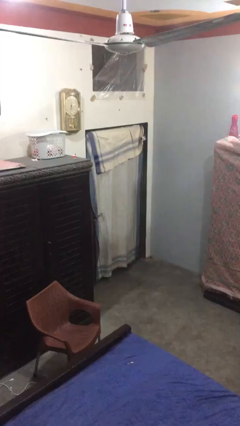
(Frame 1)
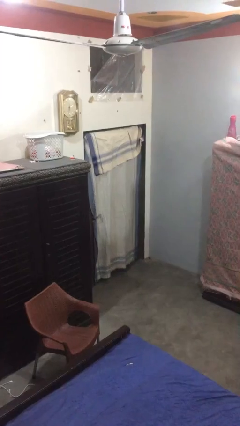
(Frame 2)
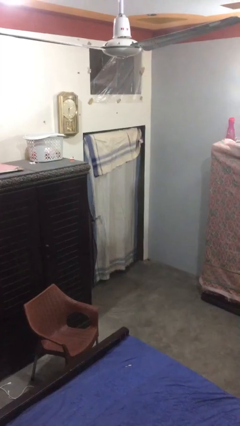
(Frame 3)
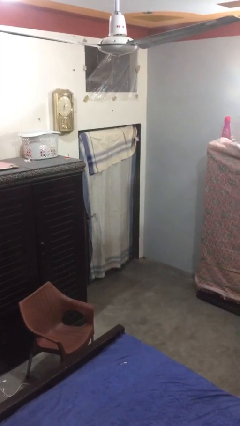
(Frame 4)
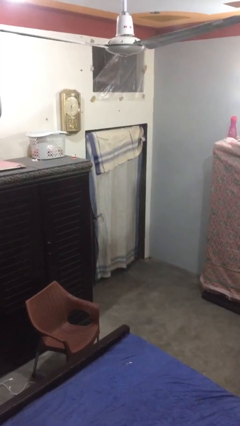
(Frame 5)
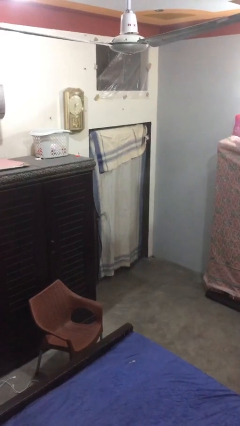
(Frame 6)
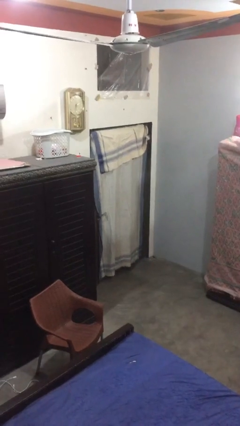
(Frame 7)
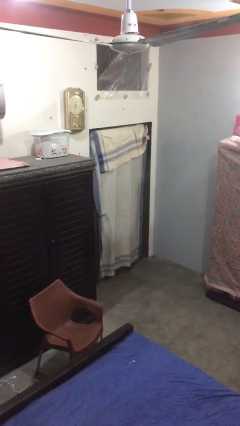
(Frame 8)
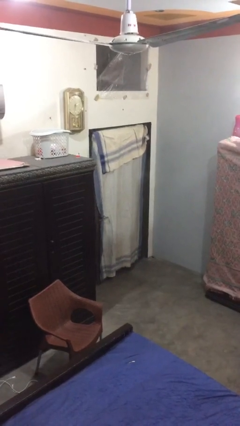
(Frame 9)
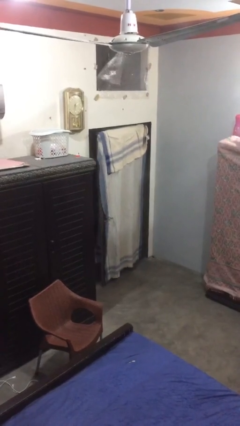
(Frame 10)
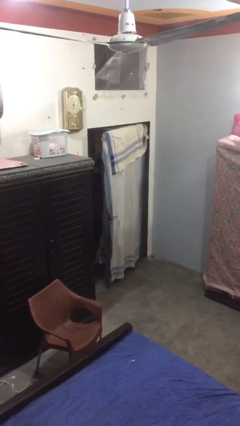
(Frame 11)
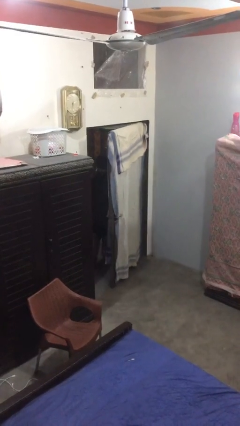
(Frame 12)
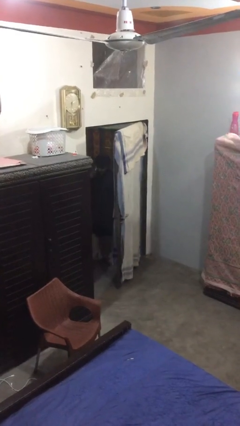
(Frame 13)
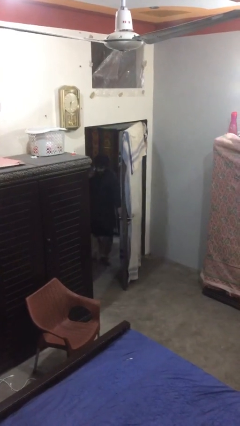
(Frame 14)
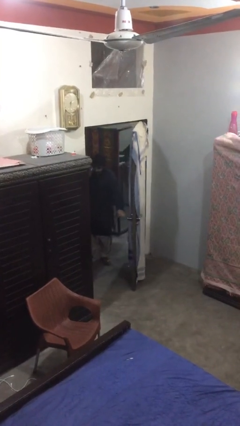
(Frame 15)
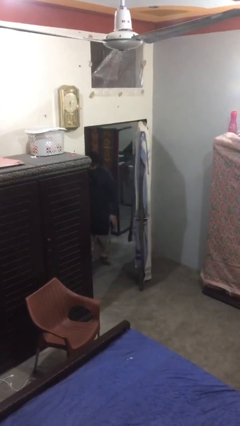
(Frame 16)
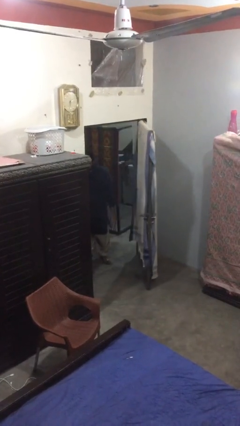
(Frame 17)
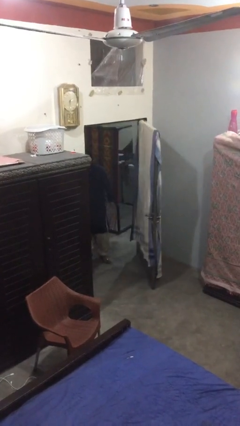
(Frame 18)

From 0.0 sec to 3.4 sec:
person opens facility door

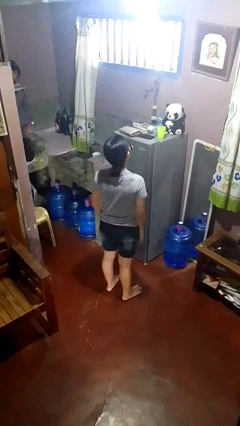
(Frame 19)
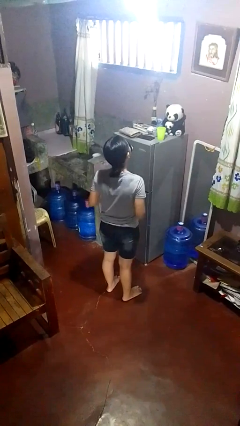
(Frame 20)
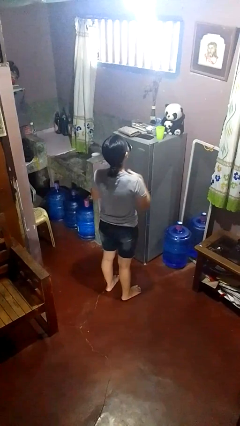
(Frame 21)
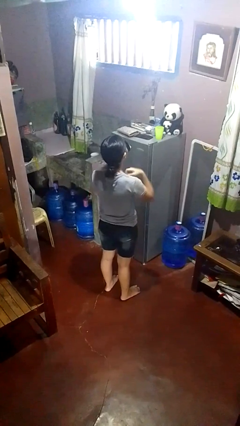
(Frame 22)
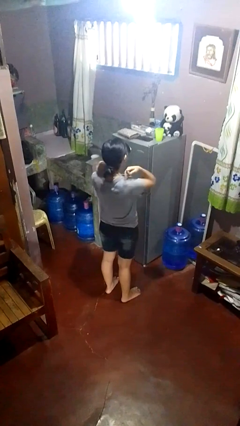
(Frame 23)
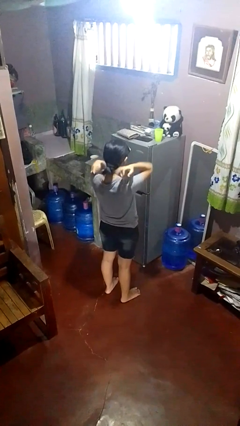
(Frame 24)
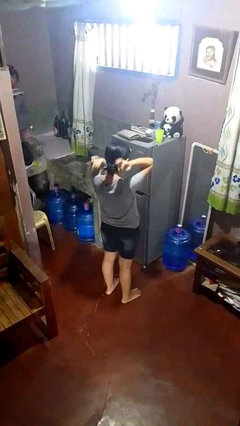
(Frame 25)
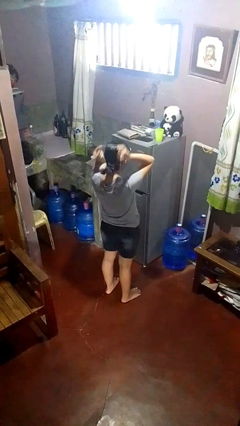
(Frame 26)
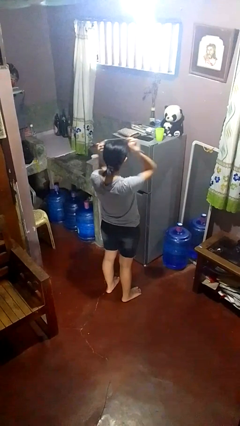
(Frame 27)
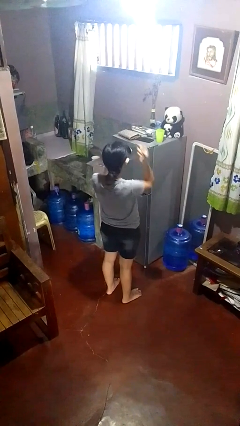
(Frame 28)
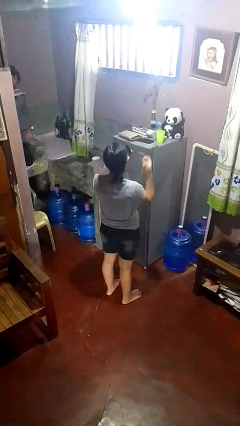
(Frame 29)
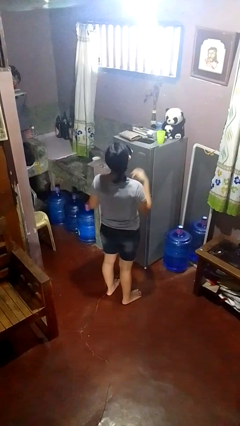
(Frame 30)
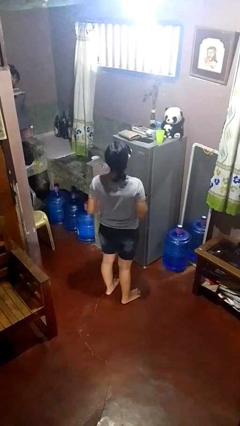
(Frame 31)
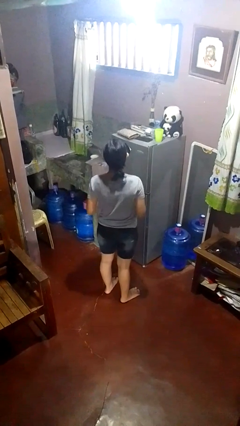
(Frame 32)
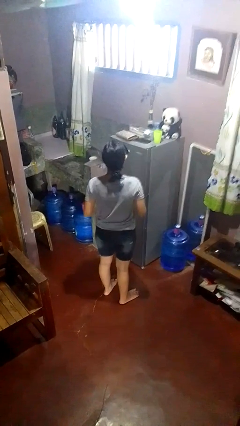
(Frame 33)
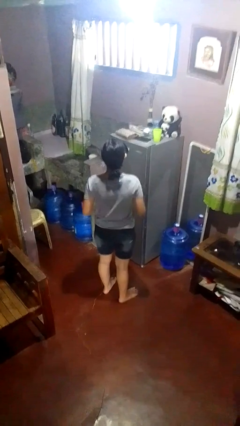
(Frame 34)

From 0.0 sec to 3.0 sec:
person takes off necklace

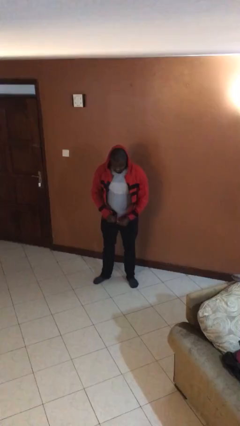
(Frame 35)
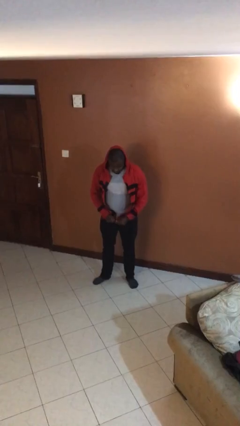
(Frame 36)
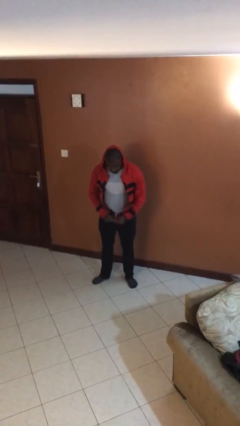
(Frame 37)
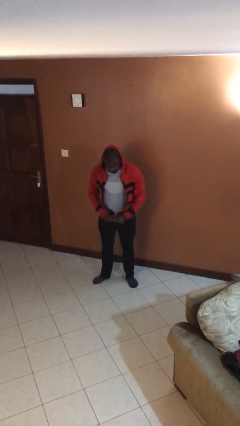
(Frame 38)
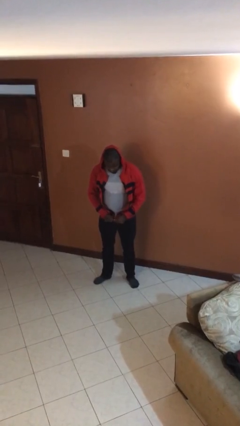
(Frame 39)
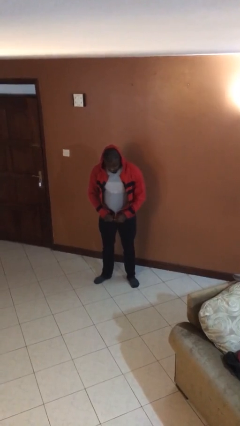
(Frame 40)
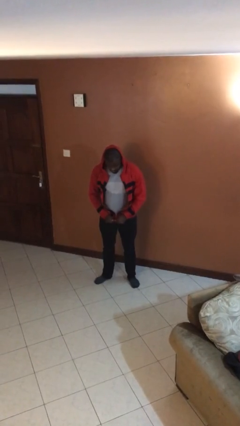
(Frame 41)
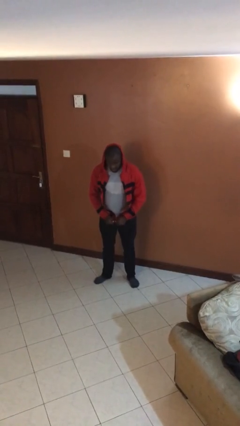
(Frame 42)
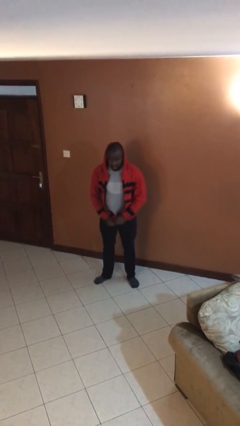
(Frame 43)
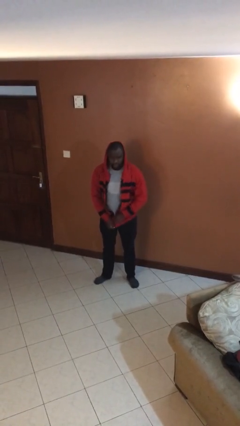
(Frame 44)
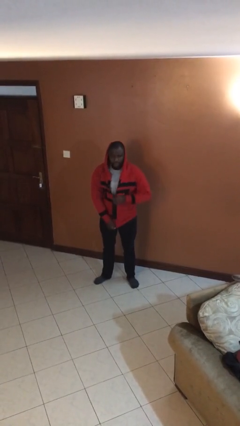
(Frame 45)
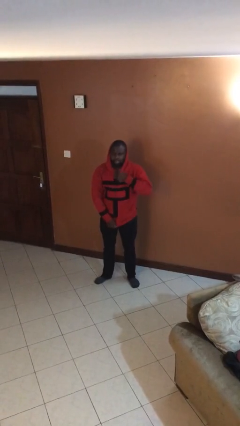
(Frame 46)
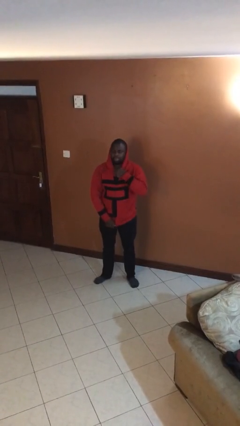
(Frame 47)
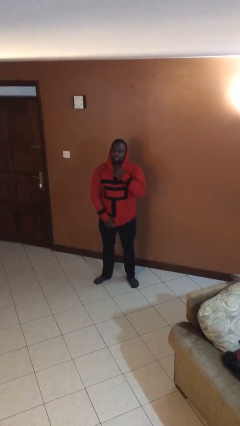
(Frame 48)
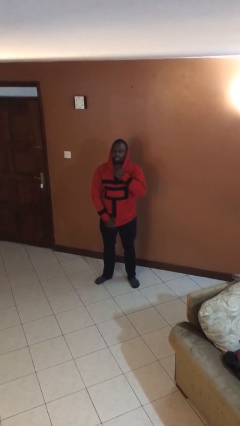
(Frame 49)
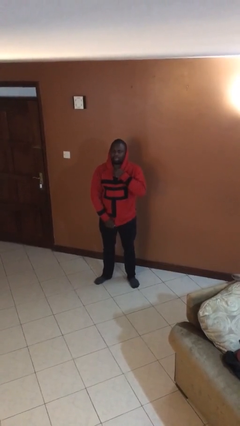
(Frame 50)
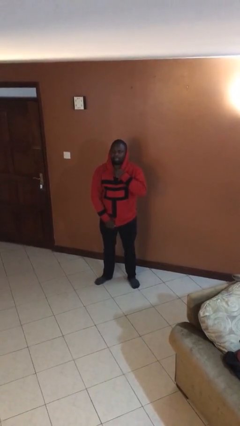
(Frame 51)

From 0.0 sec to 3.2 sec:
person zips up jacket

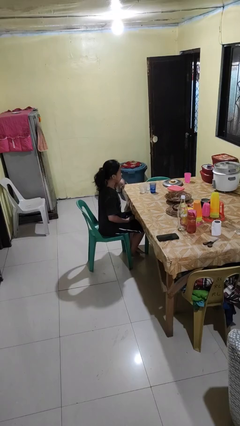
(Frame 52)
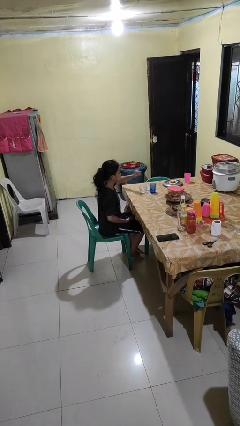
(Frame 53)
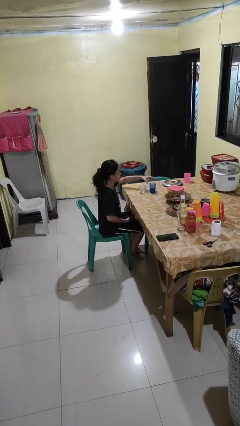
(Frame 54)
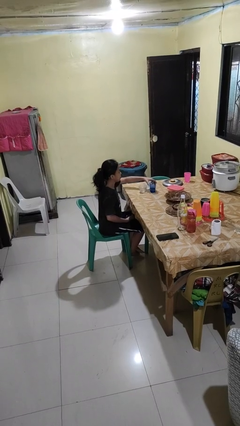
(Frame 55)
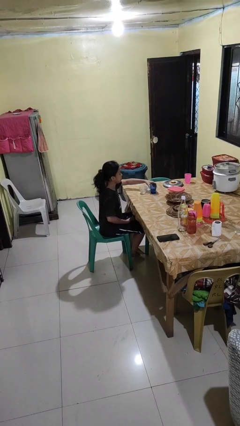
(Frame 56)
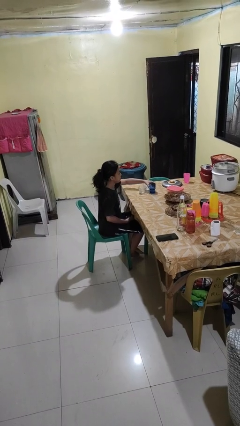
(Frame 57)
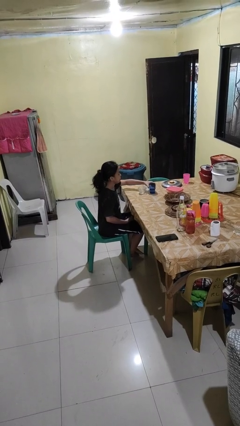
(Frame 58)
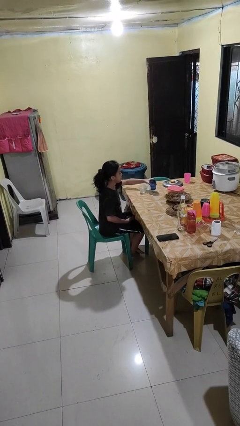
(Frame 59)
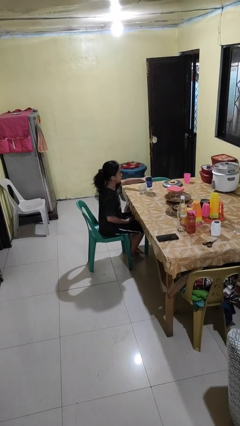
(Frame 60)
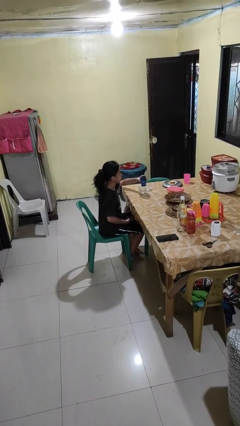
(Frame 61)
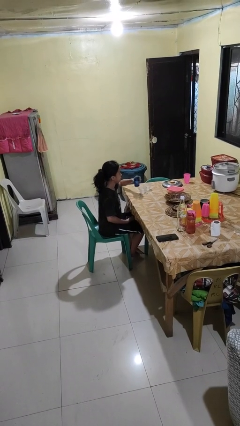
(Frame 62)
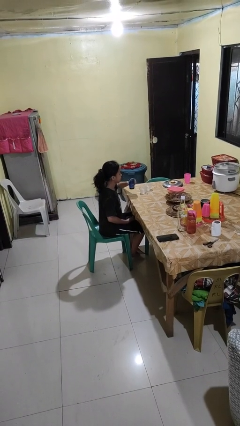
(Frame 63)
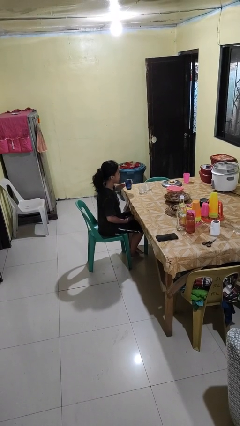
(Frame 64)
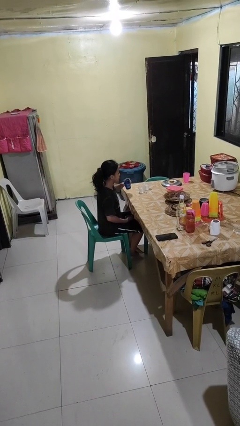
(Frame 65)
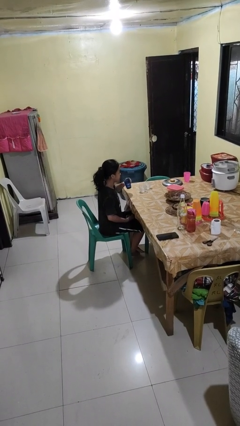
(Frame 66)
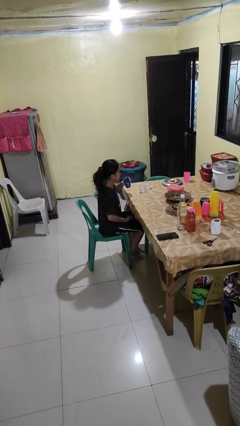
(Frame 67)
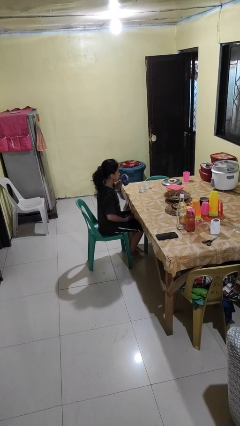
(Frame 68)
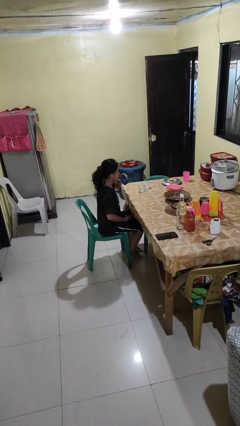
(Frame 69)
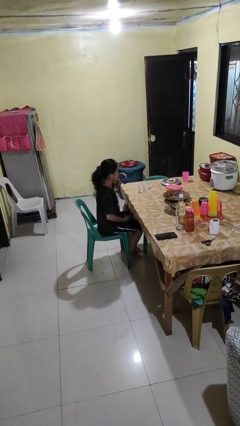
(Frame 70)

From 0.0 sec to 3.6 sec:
person picks up object from table

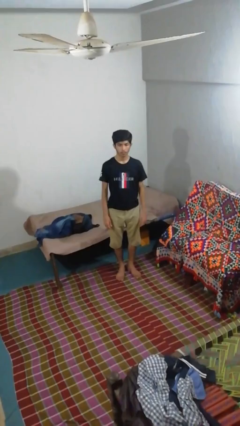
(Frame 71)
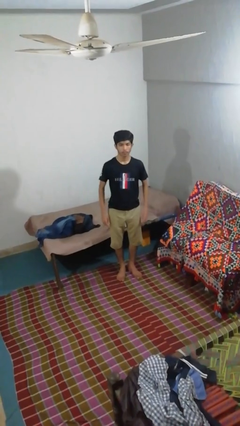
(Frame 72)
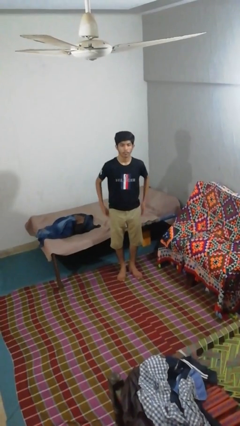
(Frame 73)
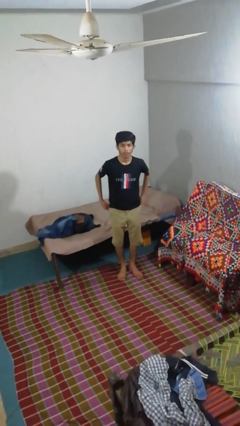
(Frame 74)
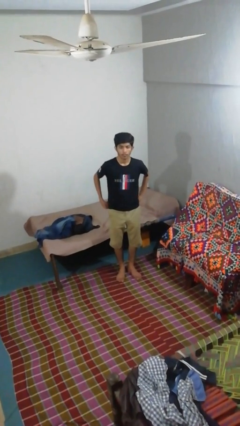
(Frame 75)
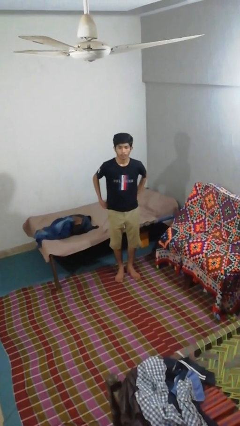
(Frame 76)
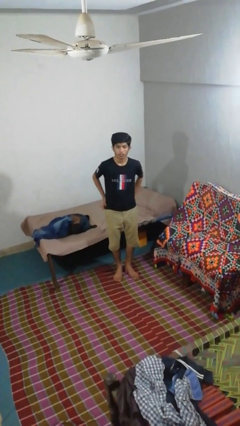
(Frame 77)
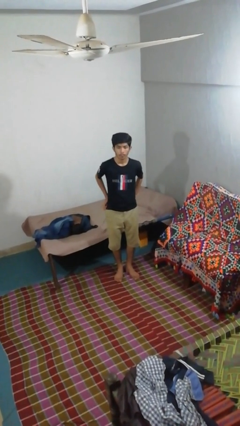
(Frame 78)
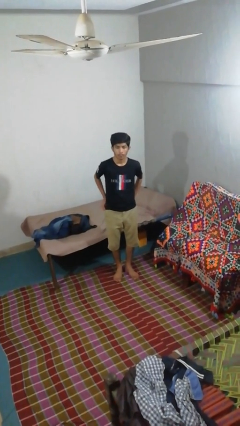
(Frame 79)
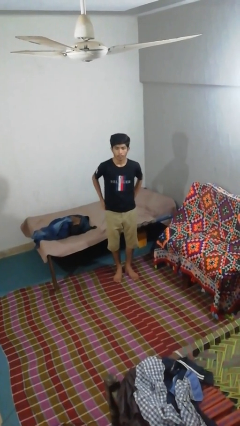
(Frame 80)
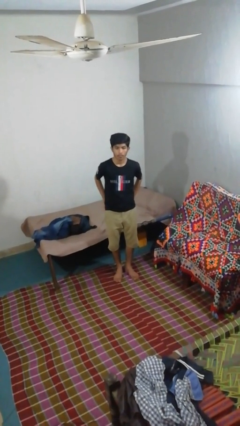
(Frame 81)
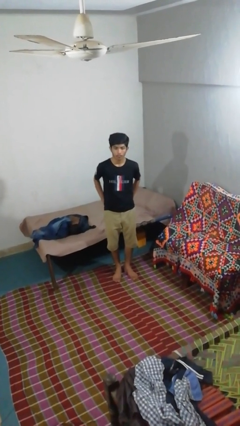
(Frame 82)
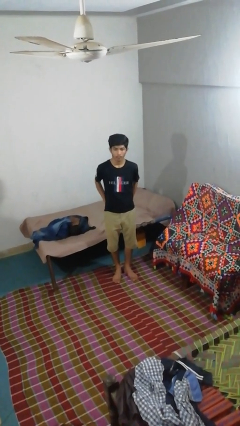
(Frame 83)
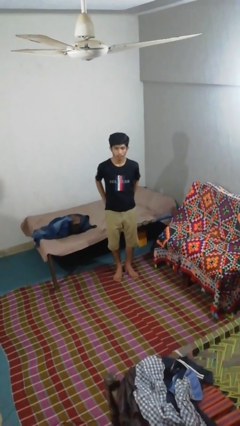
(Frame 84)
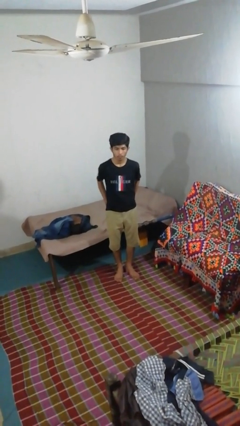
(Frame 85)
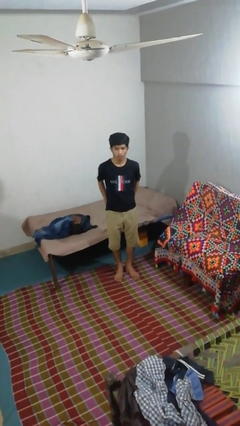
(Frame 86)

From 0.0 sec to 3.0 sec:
person puts hands in back pockets

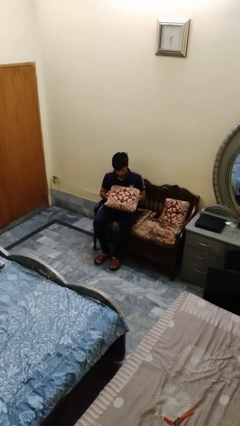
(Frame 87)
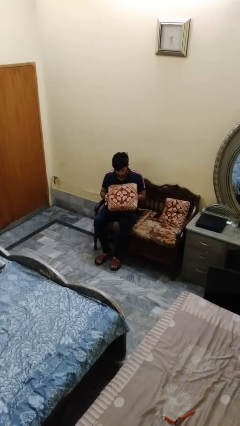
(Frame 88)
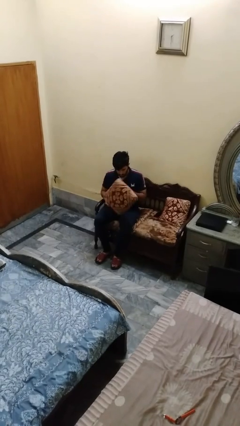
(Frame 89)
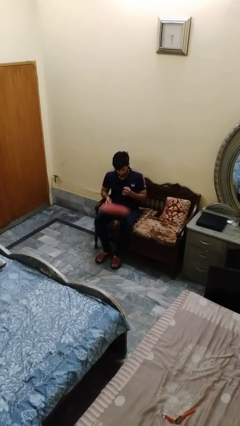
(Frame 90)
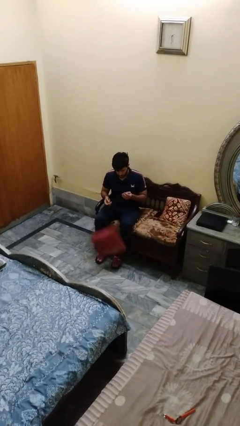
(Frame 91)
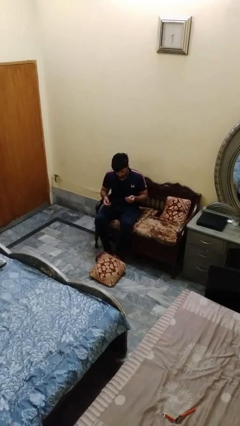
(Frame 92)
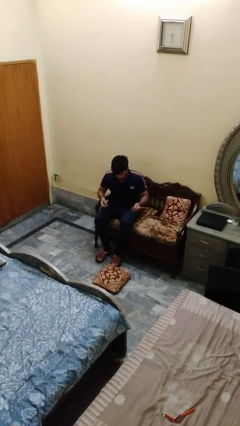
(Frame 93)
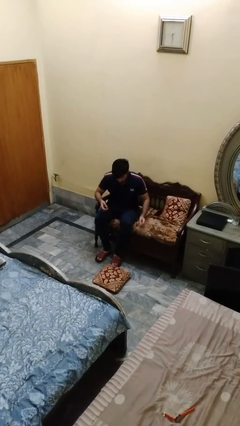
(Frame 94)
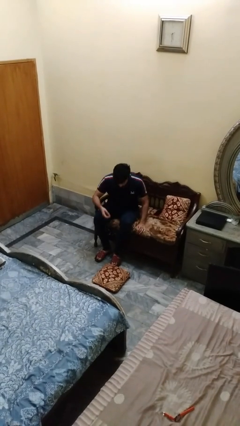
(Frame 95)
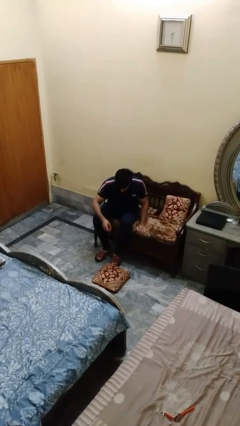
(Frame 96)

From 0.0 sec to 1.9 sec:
person drops object
